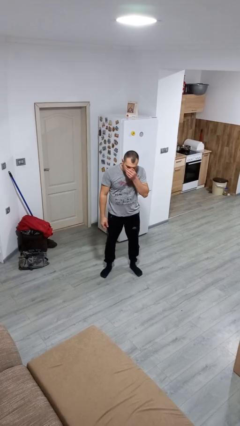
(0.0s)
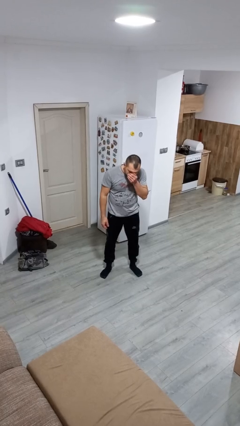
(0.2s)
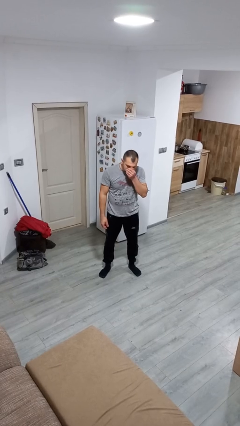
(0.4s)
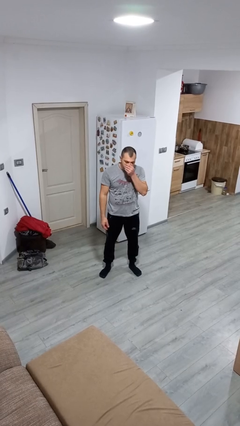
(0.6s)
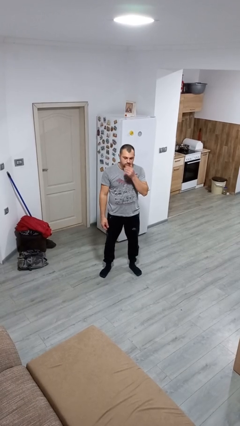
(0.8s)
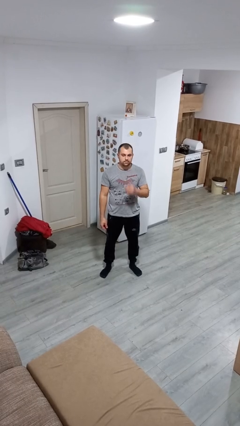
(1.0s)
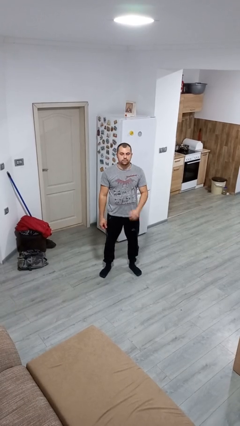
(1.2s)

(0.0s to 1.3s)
person sneezes into hand

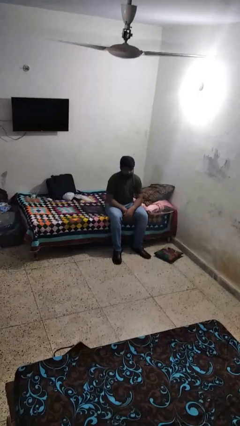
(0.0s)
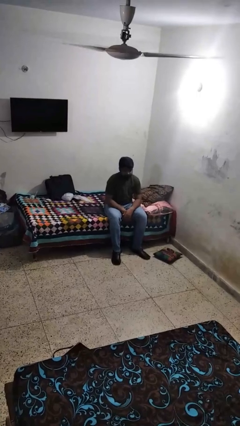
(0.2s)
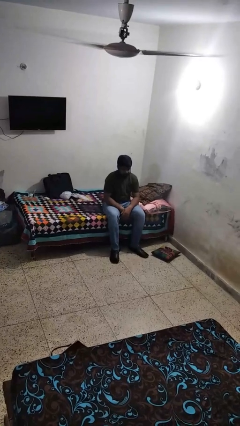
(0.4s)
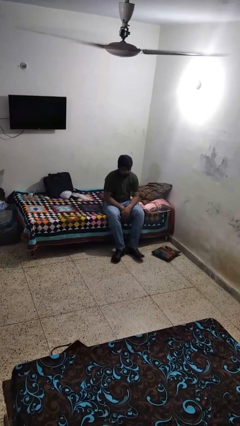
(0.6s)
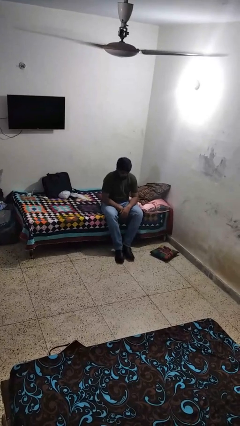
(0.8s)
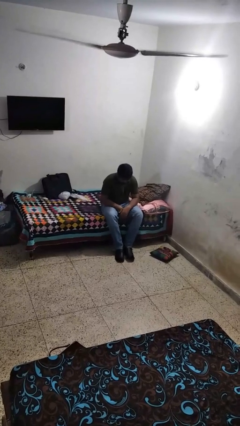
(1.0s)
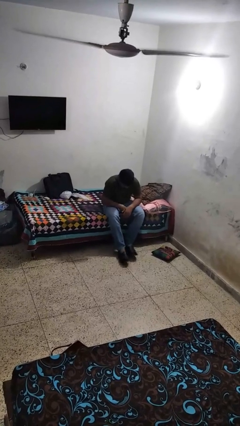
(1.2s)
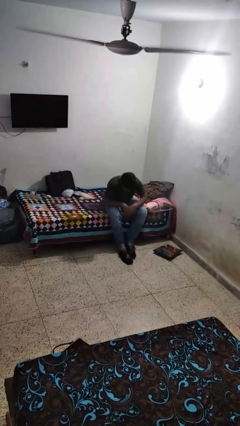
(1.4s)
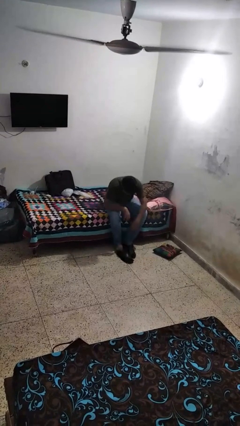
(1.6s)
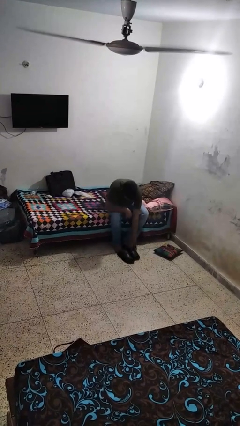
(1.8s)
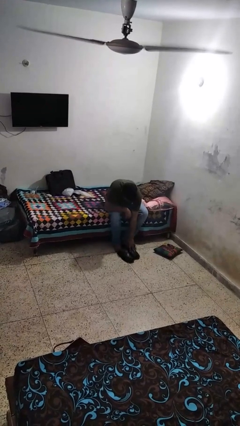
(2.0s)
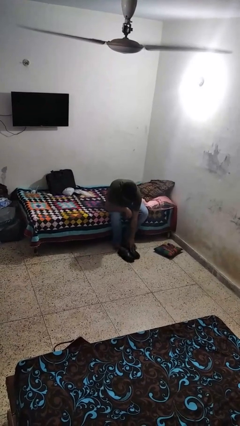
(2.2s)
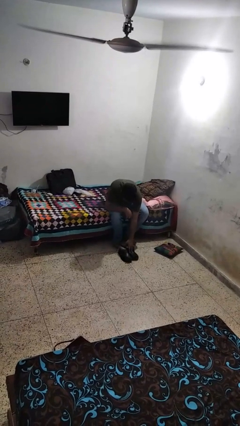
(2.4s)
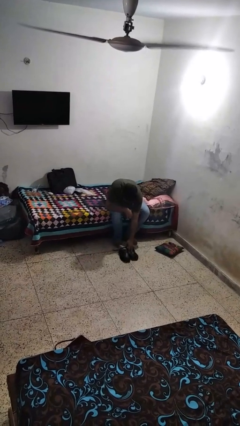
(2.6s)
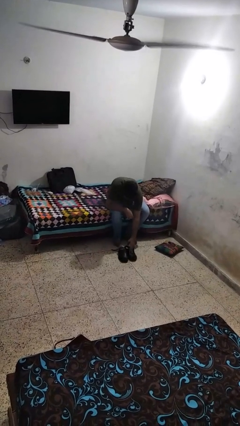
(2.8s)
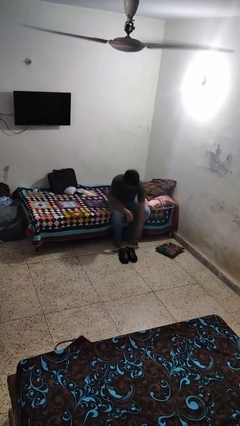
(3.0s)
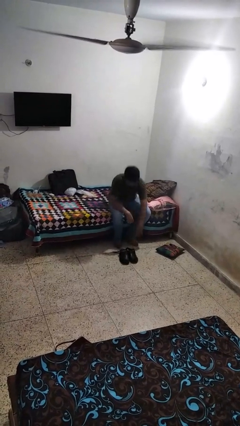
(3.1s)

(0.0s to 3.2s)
person takes off shoes

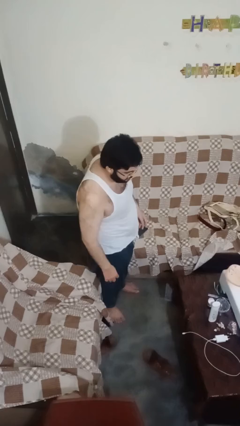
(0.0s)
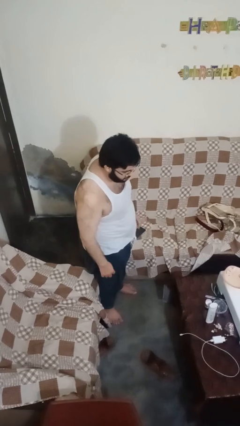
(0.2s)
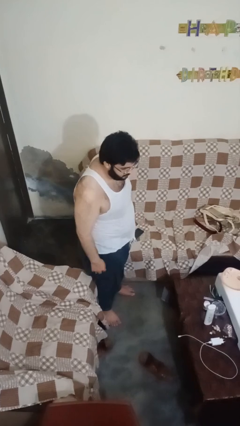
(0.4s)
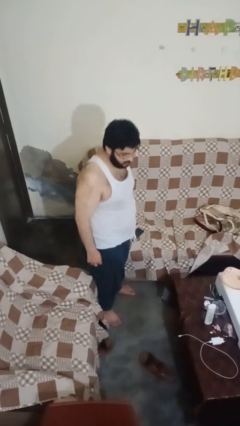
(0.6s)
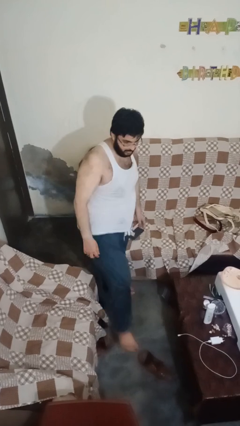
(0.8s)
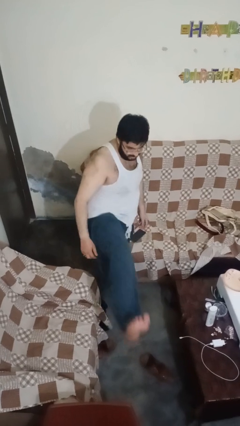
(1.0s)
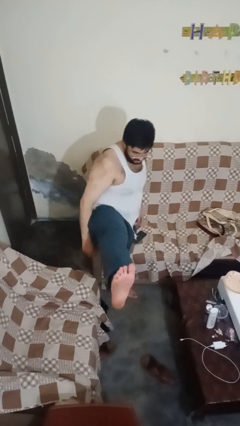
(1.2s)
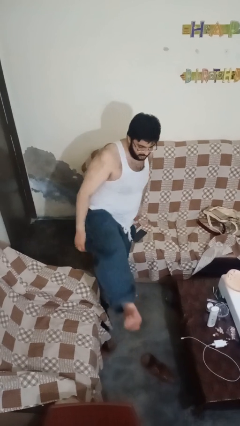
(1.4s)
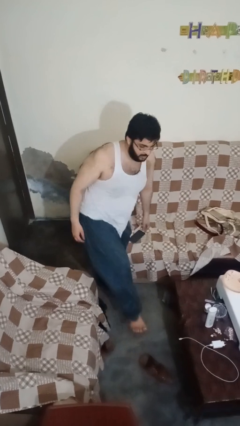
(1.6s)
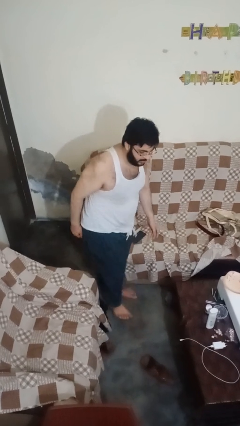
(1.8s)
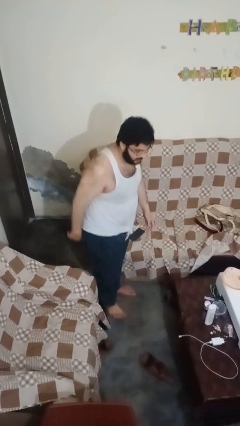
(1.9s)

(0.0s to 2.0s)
person karate kicks

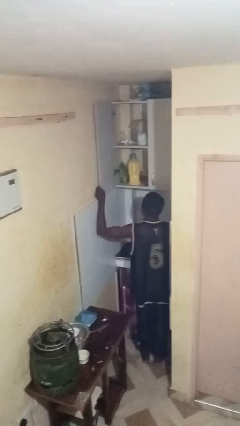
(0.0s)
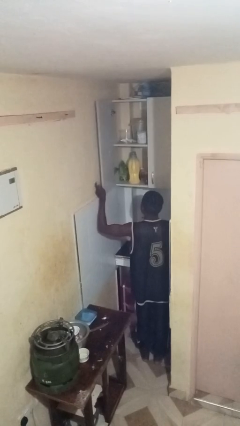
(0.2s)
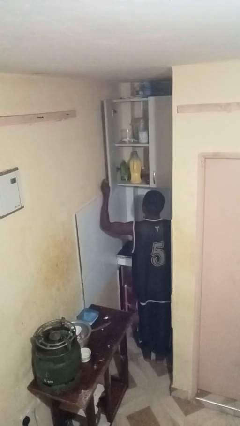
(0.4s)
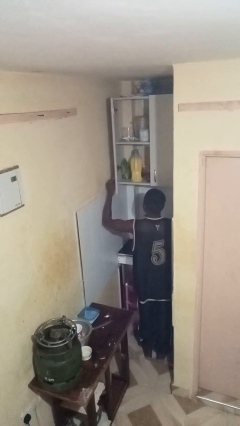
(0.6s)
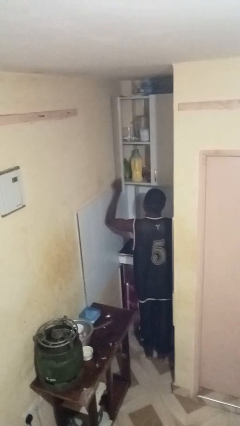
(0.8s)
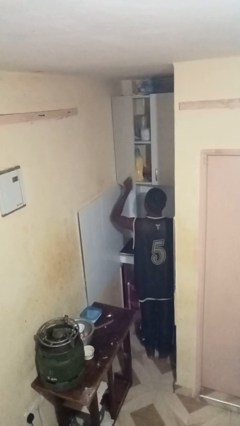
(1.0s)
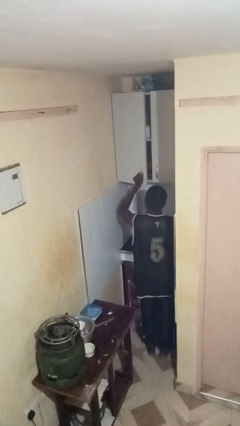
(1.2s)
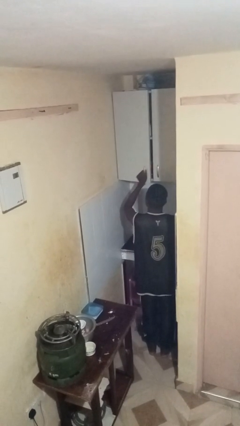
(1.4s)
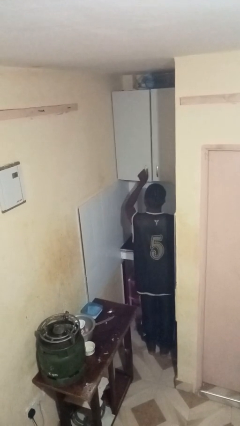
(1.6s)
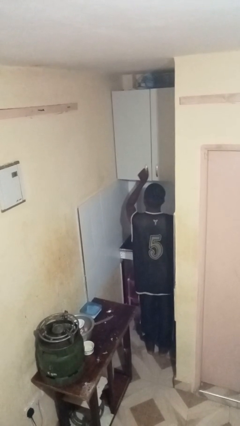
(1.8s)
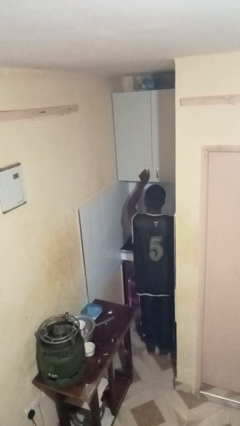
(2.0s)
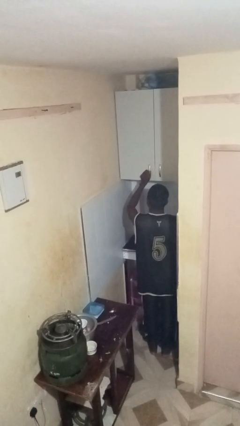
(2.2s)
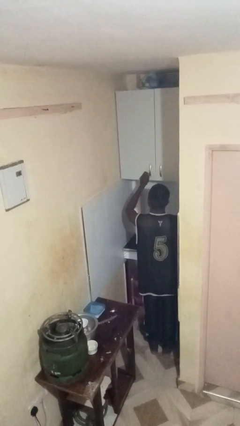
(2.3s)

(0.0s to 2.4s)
person closes cabinet

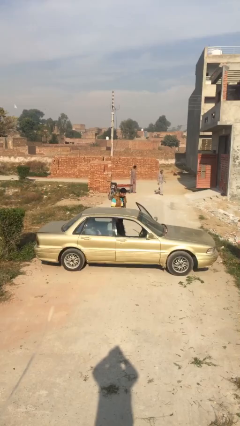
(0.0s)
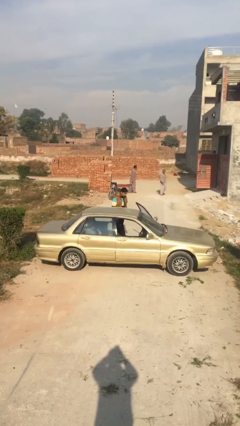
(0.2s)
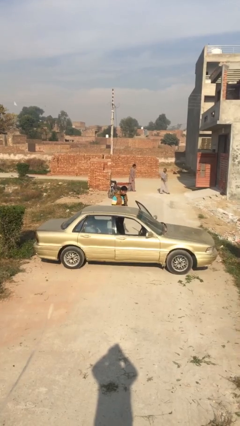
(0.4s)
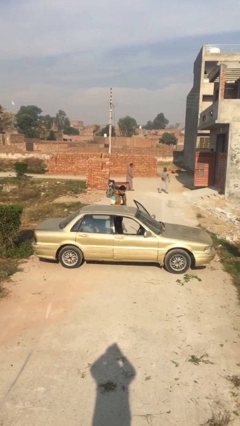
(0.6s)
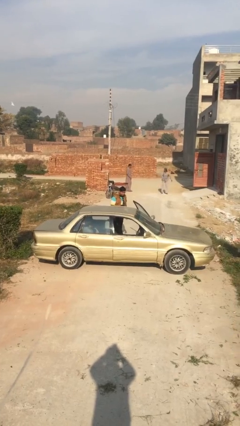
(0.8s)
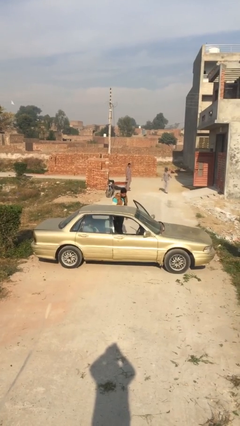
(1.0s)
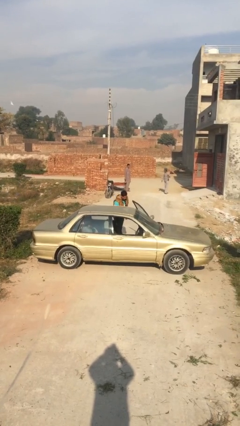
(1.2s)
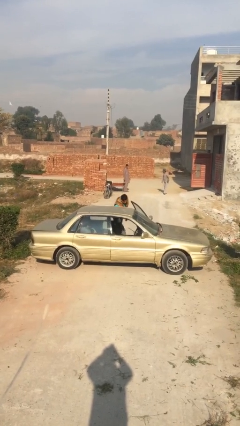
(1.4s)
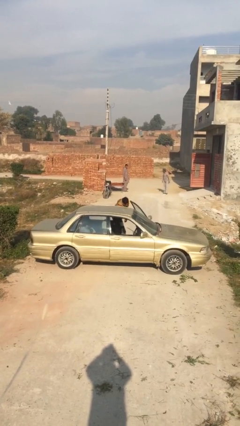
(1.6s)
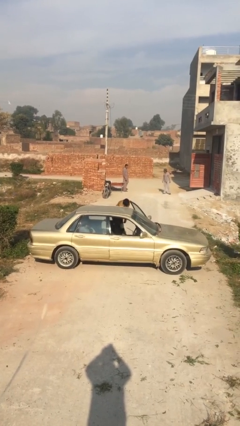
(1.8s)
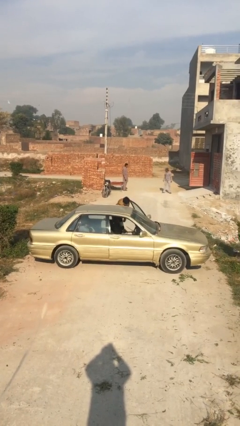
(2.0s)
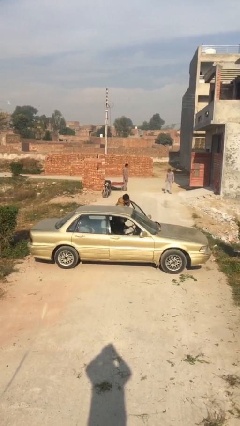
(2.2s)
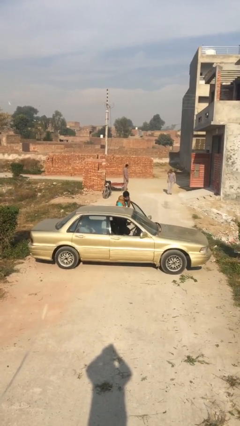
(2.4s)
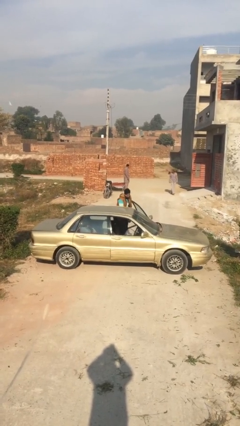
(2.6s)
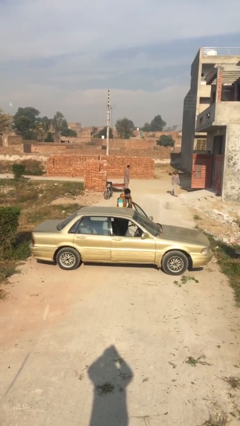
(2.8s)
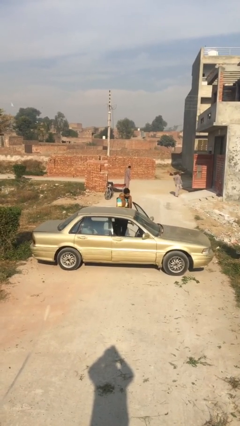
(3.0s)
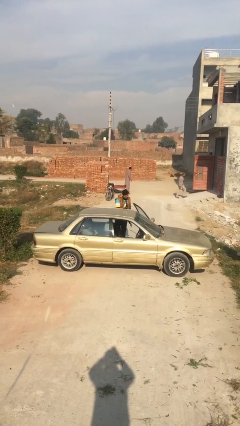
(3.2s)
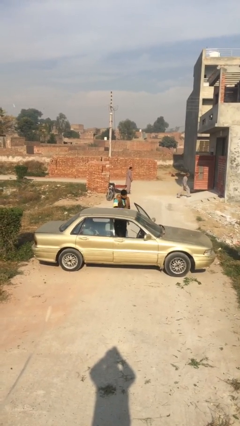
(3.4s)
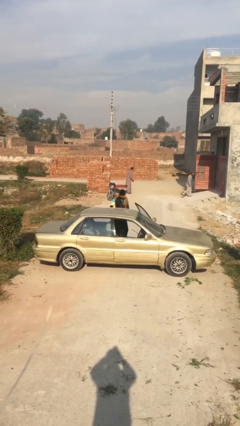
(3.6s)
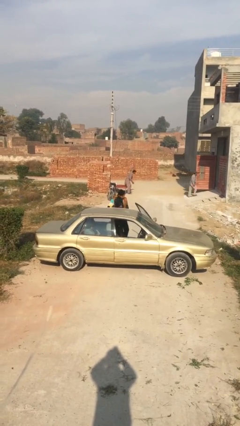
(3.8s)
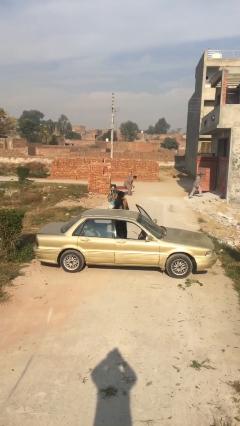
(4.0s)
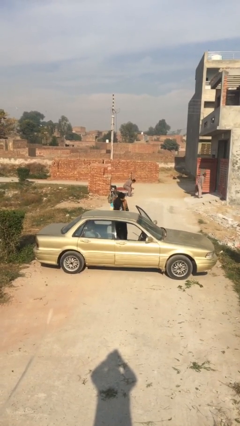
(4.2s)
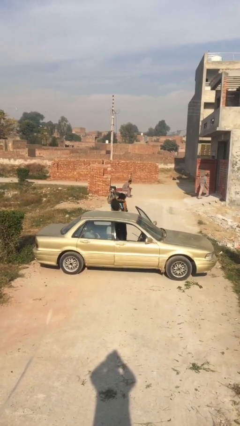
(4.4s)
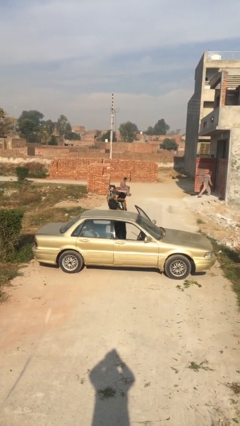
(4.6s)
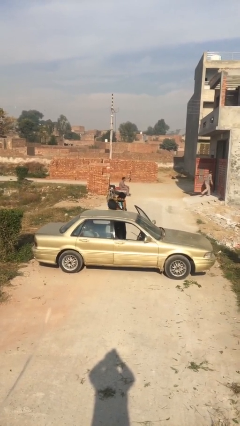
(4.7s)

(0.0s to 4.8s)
person unloads car

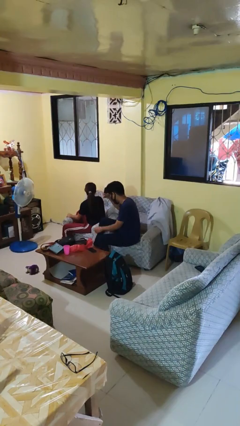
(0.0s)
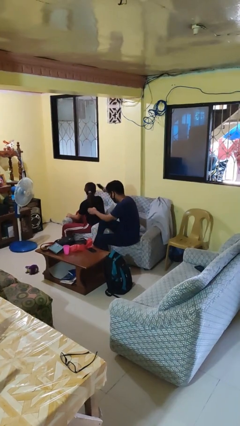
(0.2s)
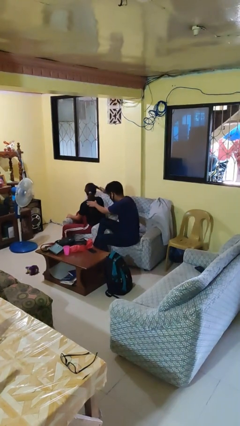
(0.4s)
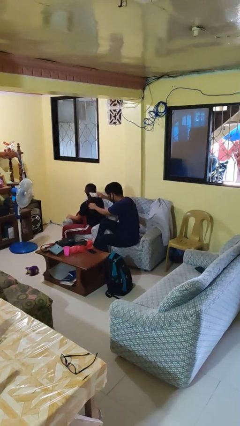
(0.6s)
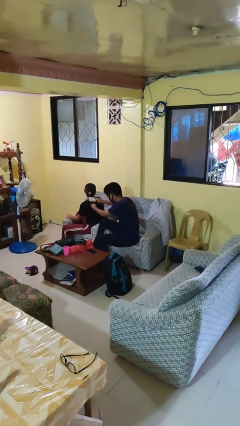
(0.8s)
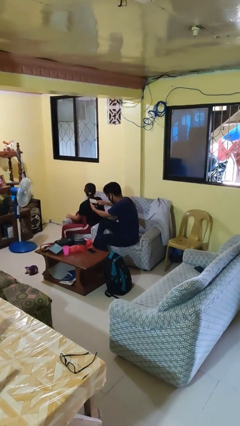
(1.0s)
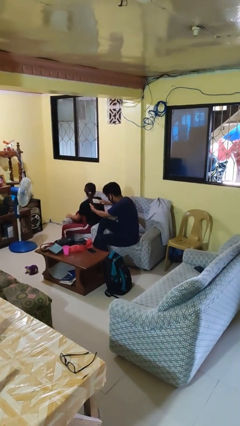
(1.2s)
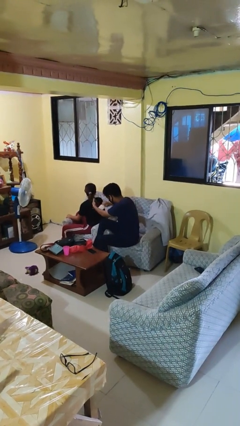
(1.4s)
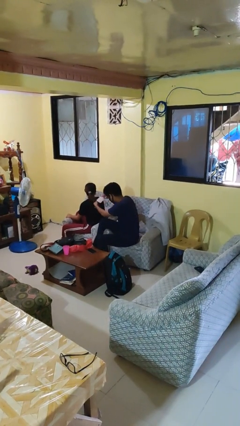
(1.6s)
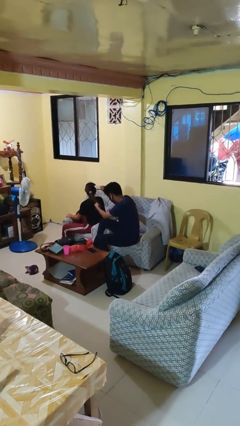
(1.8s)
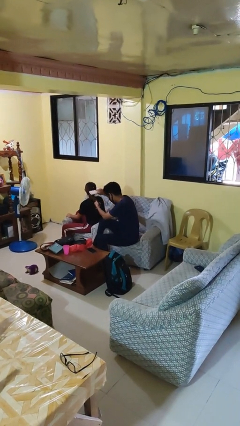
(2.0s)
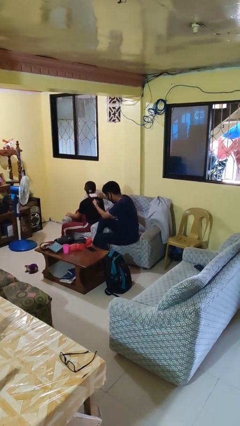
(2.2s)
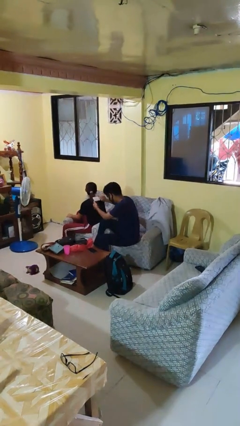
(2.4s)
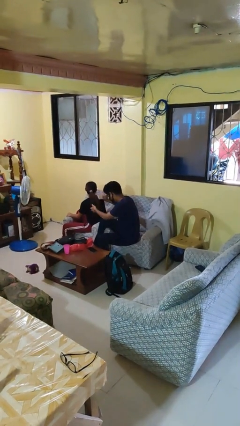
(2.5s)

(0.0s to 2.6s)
person brushes hair of person

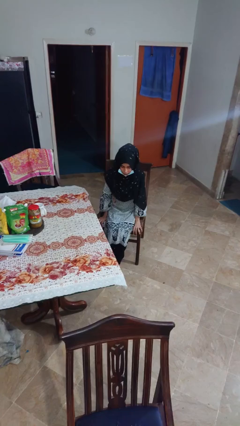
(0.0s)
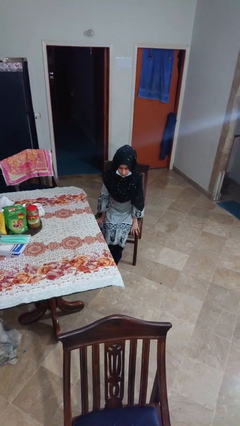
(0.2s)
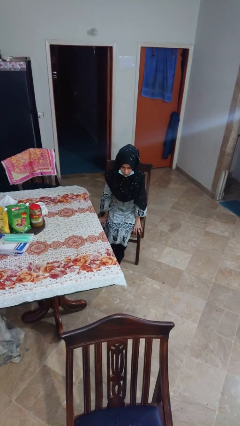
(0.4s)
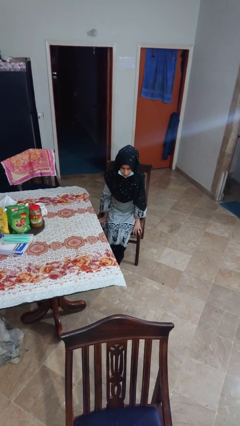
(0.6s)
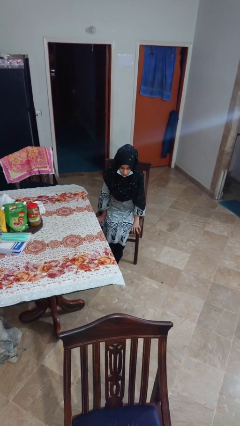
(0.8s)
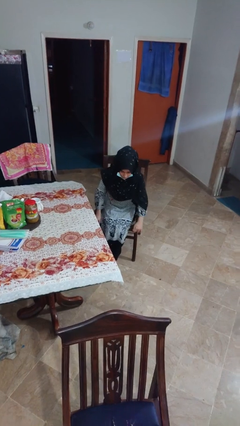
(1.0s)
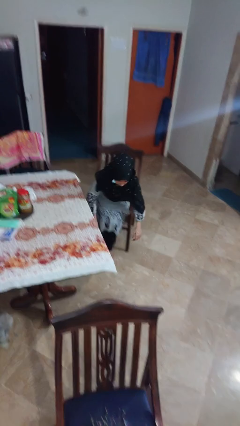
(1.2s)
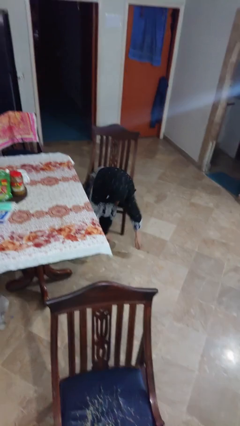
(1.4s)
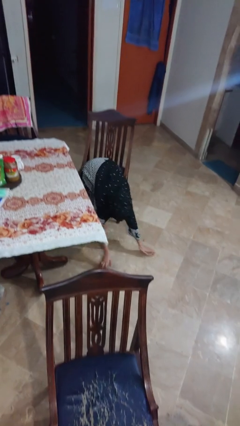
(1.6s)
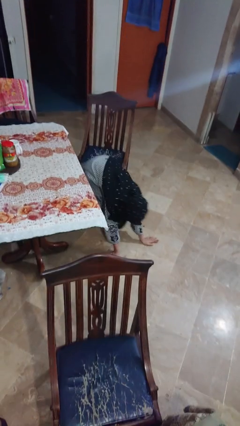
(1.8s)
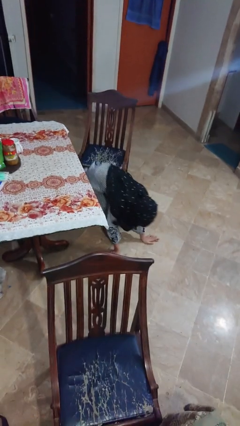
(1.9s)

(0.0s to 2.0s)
person falls from chair
